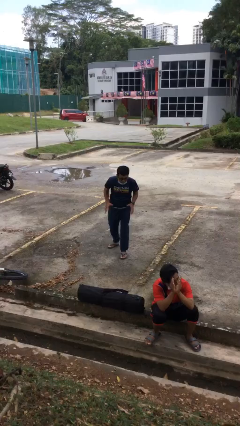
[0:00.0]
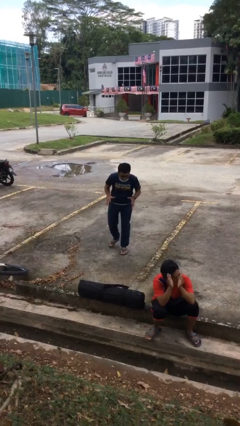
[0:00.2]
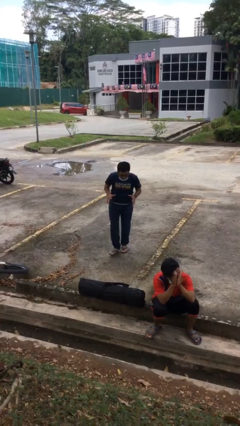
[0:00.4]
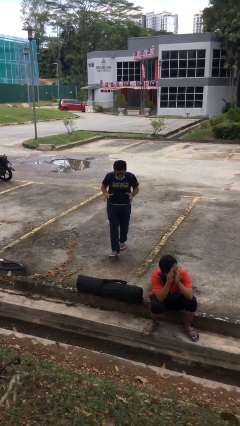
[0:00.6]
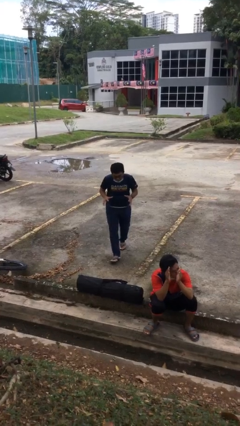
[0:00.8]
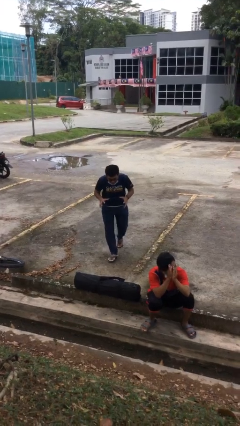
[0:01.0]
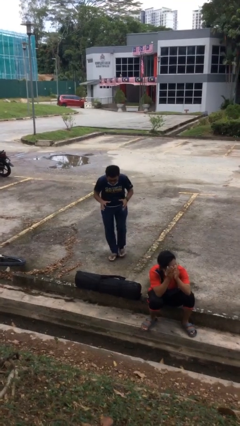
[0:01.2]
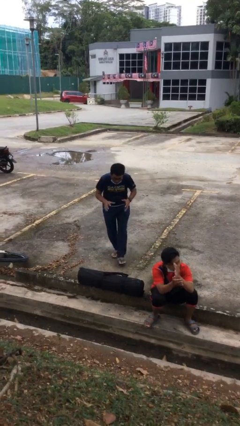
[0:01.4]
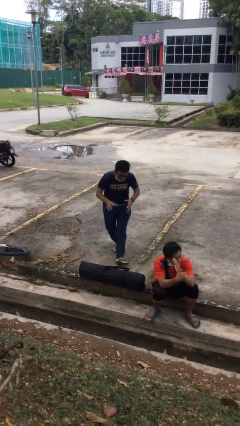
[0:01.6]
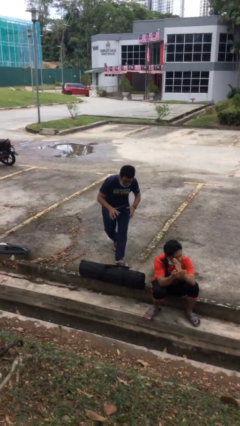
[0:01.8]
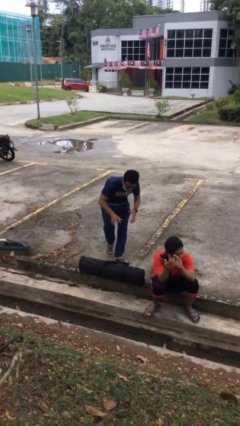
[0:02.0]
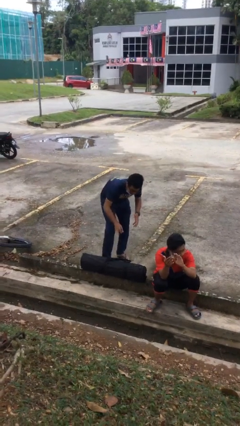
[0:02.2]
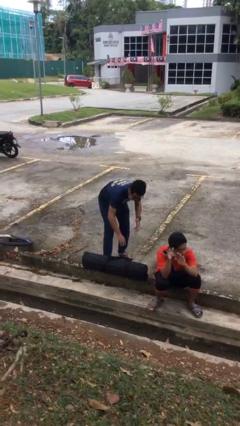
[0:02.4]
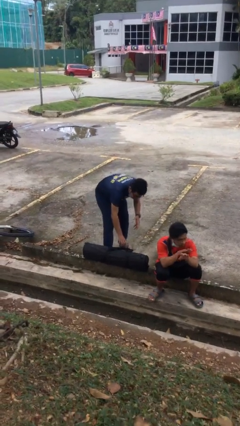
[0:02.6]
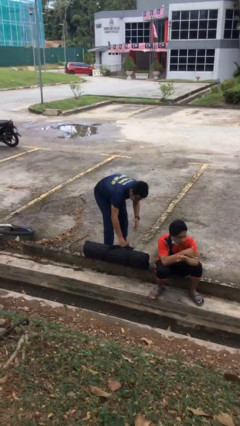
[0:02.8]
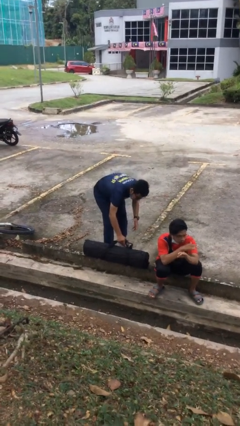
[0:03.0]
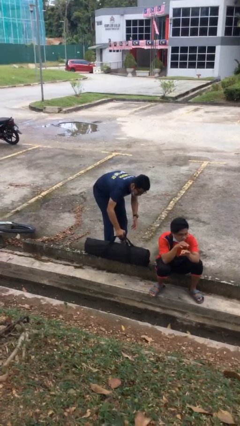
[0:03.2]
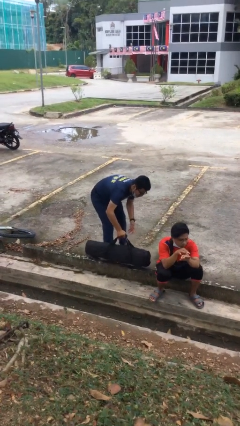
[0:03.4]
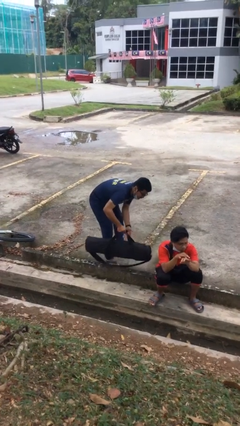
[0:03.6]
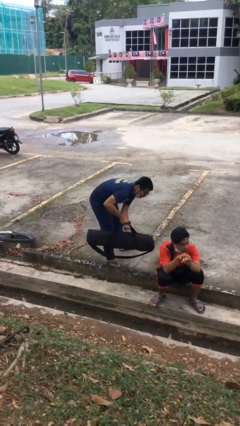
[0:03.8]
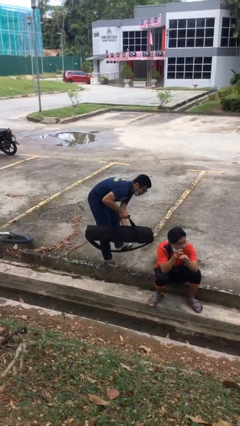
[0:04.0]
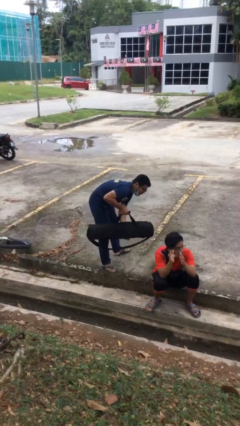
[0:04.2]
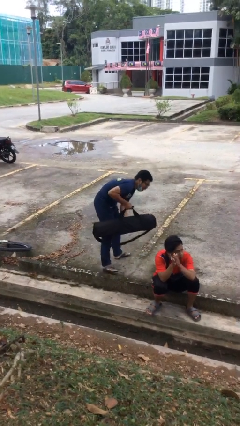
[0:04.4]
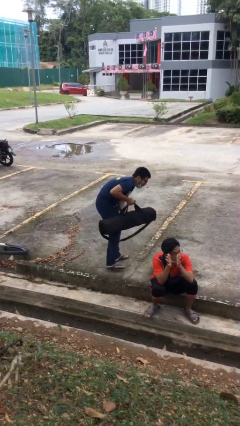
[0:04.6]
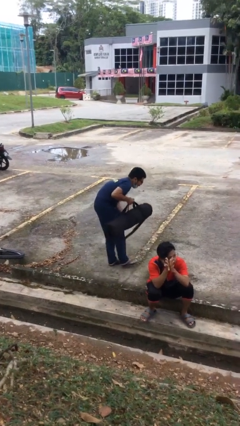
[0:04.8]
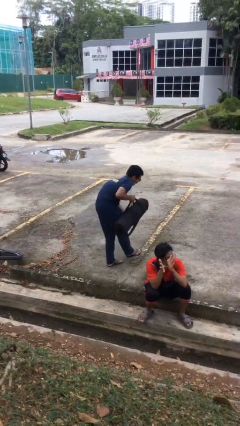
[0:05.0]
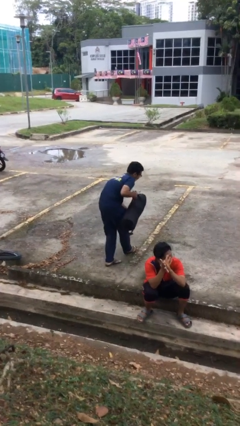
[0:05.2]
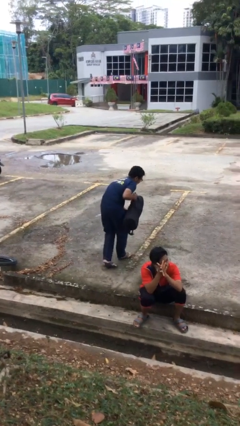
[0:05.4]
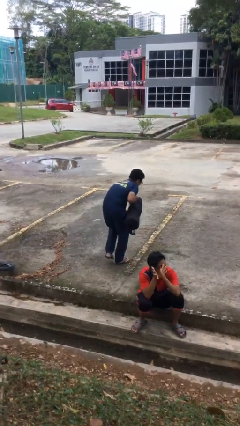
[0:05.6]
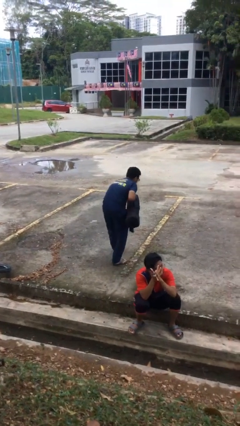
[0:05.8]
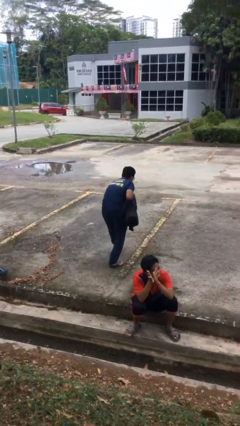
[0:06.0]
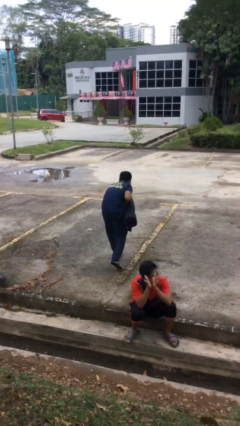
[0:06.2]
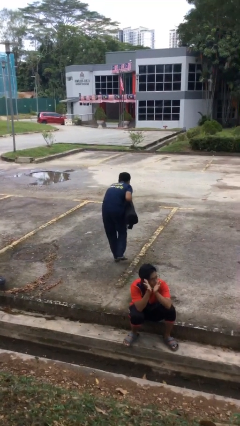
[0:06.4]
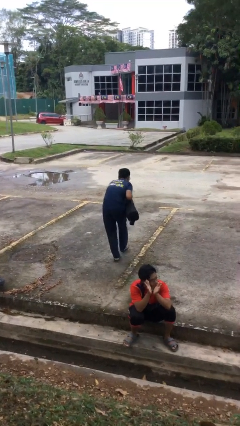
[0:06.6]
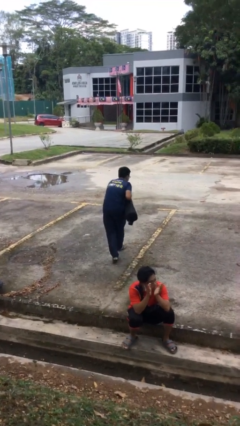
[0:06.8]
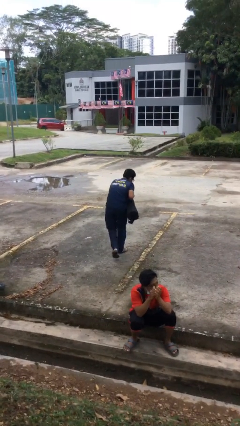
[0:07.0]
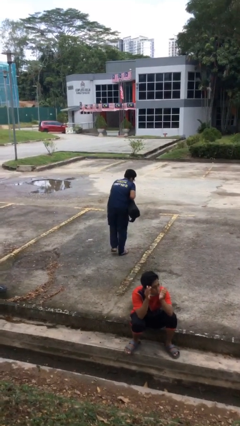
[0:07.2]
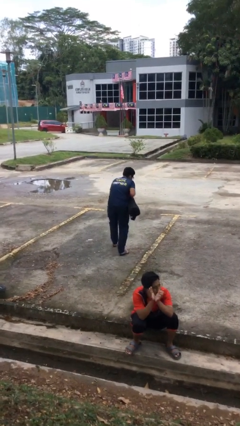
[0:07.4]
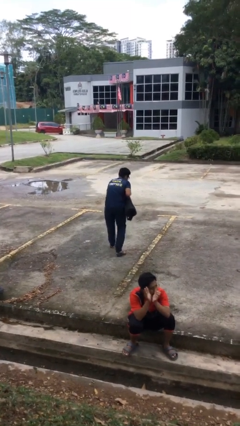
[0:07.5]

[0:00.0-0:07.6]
person steals object from person

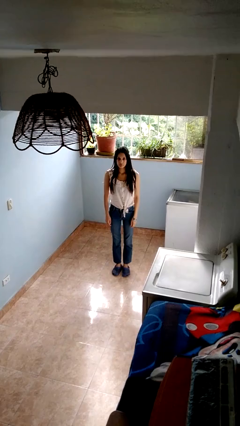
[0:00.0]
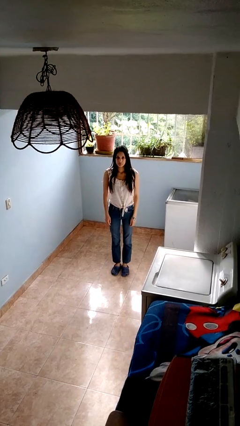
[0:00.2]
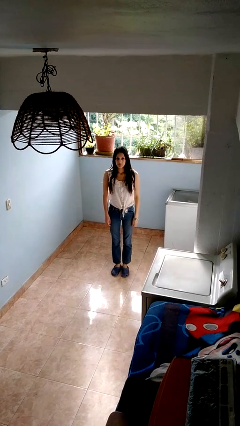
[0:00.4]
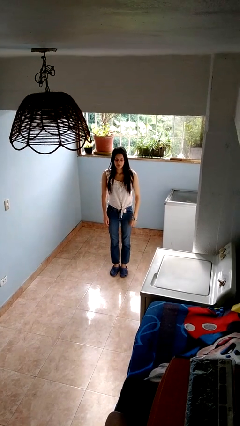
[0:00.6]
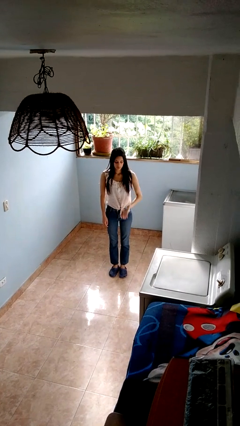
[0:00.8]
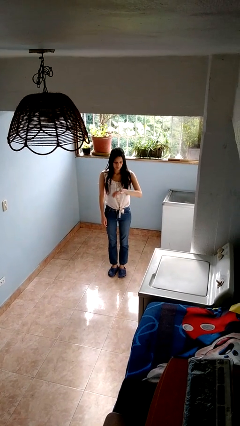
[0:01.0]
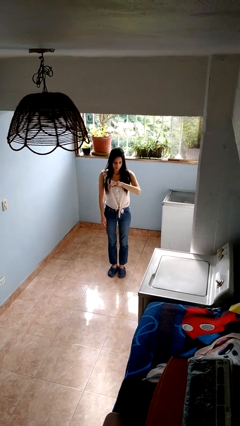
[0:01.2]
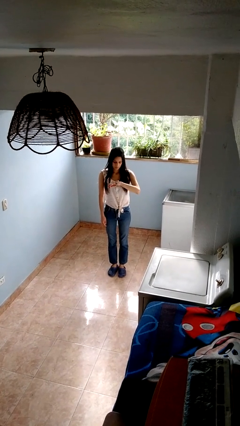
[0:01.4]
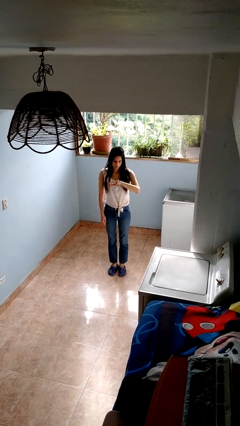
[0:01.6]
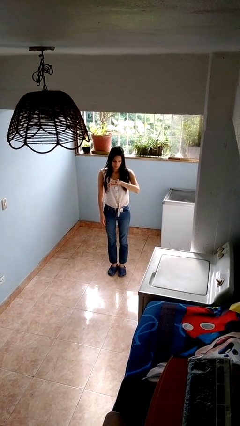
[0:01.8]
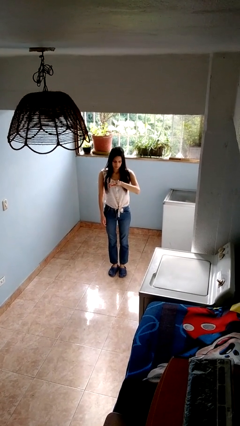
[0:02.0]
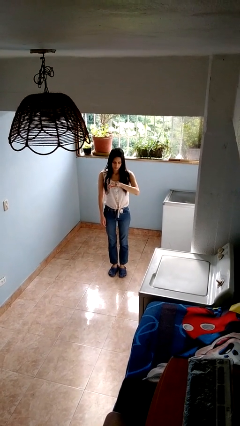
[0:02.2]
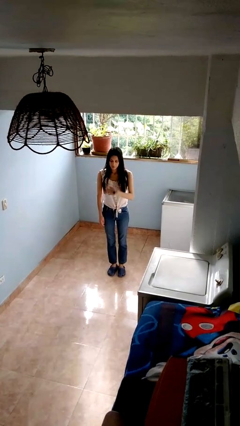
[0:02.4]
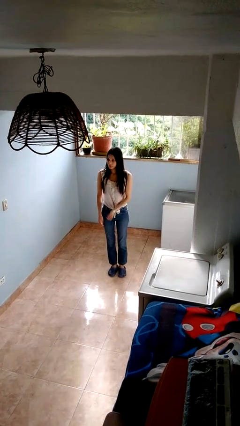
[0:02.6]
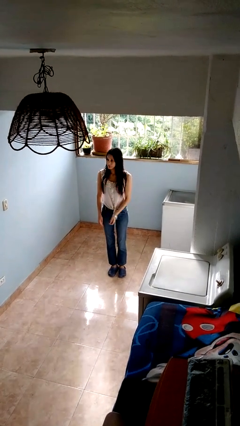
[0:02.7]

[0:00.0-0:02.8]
person looks at wristwatch

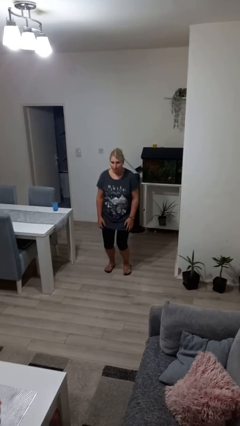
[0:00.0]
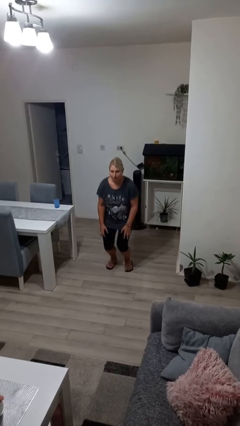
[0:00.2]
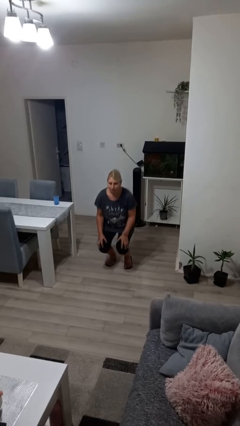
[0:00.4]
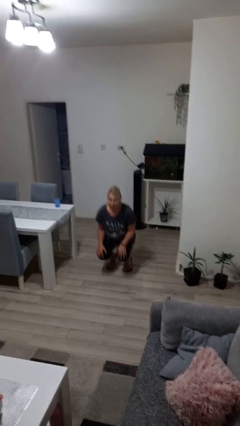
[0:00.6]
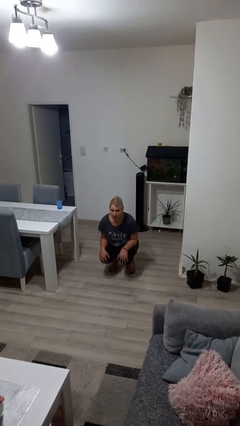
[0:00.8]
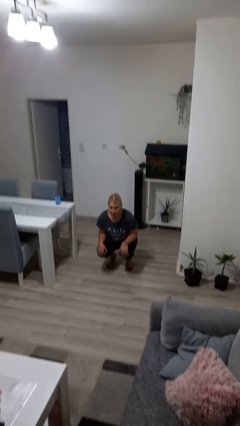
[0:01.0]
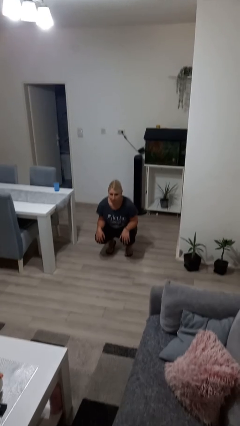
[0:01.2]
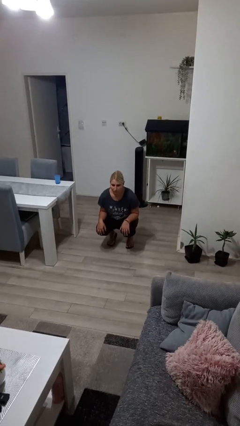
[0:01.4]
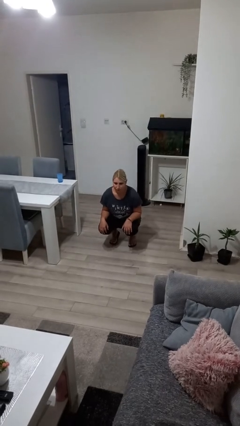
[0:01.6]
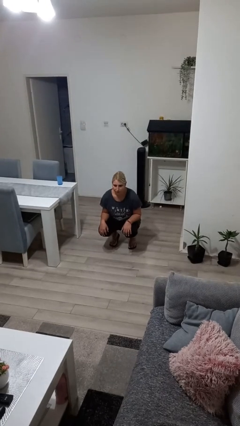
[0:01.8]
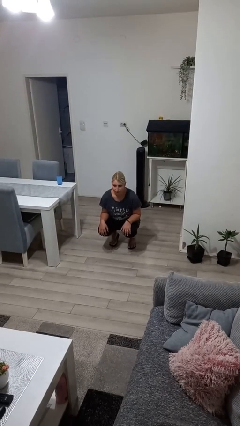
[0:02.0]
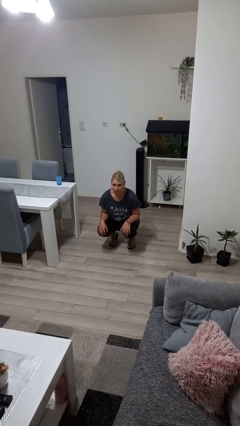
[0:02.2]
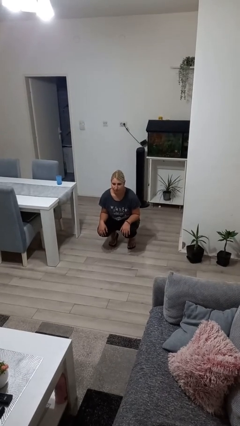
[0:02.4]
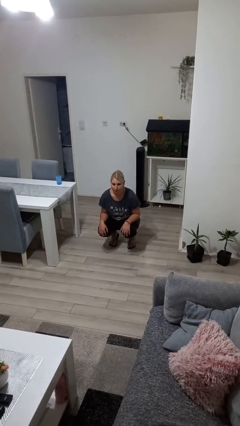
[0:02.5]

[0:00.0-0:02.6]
person squats

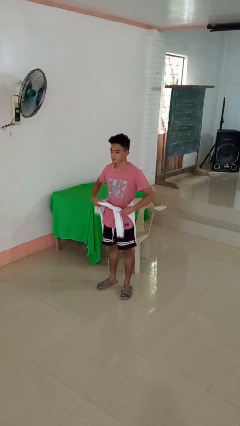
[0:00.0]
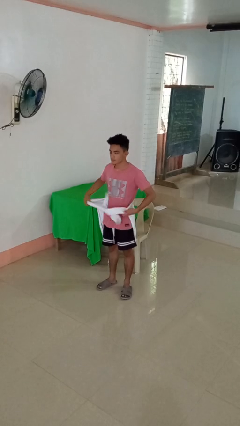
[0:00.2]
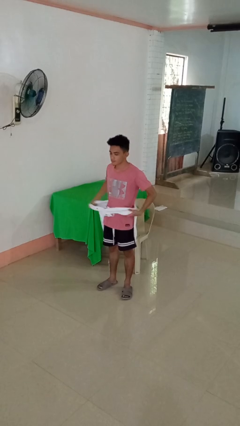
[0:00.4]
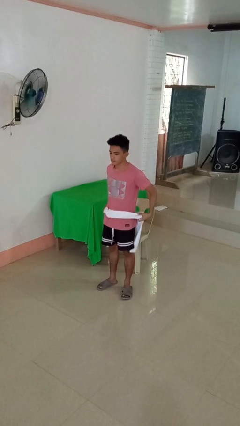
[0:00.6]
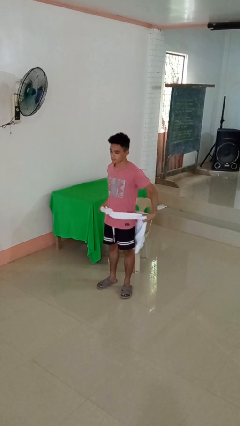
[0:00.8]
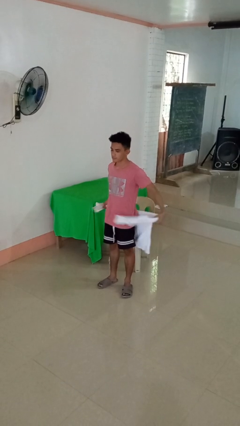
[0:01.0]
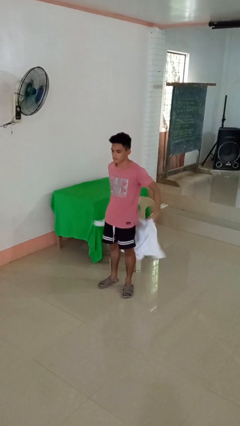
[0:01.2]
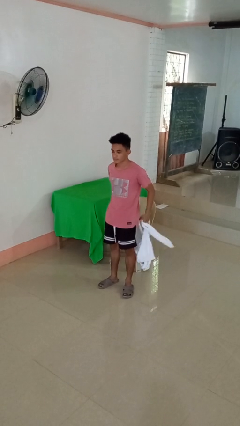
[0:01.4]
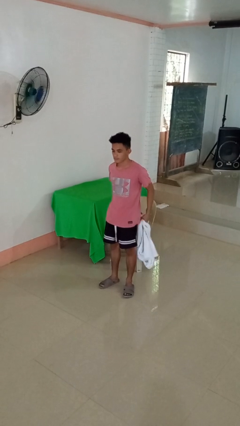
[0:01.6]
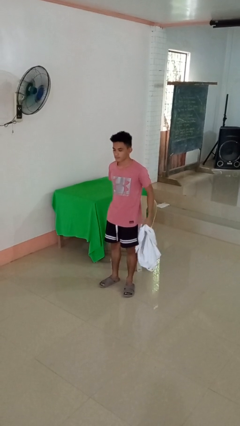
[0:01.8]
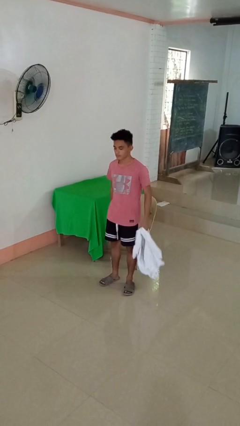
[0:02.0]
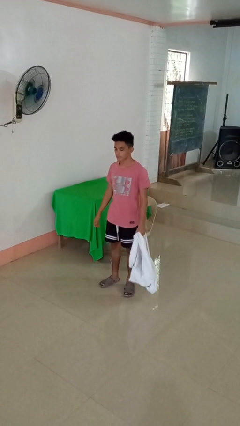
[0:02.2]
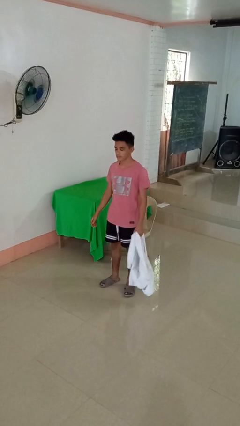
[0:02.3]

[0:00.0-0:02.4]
person unties jacket around waist

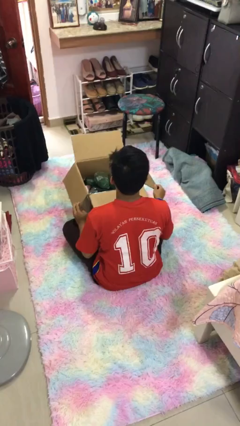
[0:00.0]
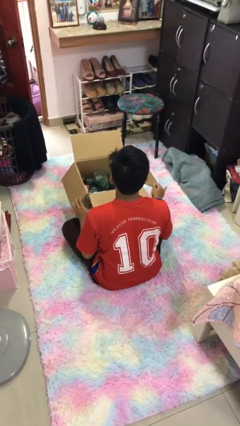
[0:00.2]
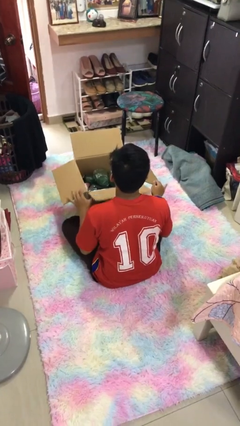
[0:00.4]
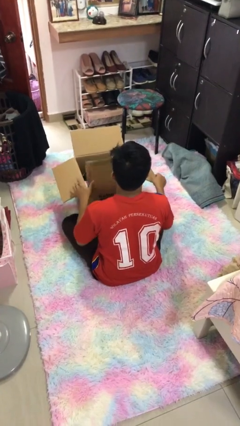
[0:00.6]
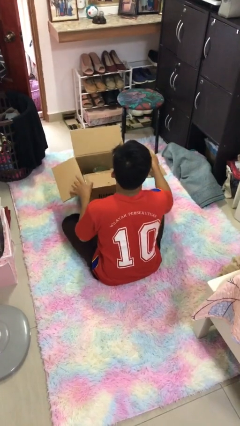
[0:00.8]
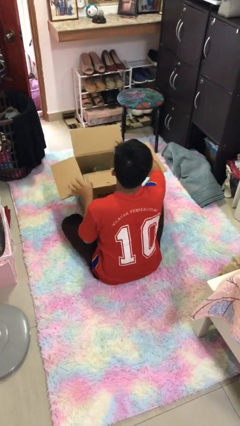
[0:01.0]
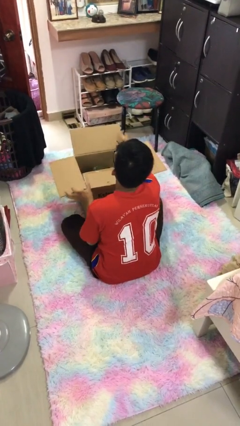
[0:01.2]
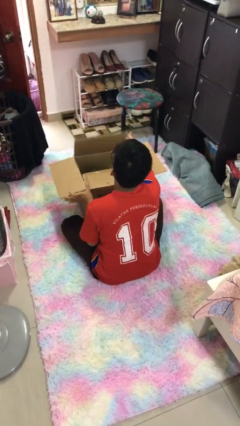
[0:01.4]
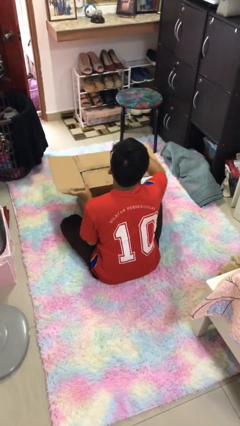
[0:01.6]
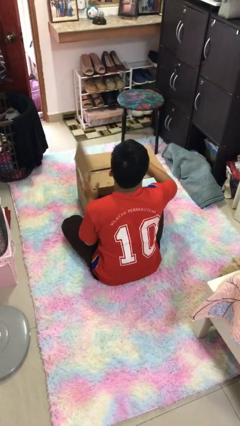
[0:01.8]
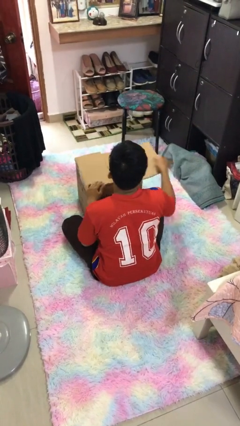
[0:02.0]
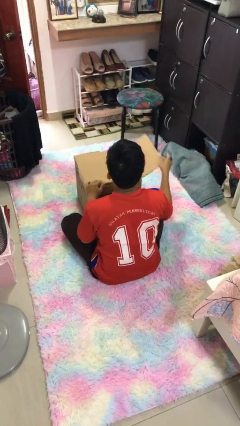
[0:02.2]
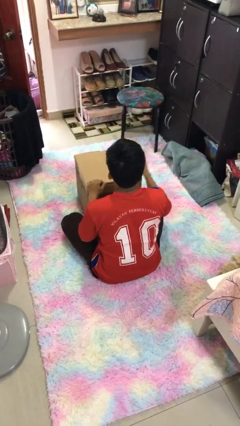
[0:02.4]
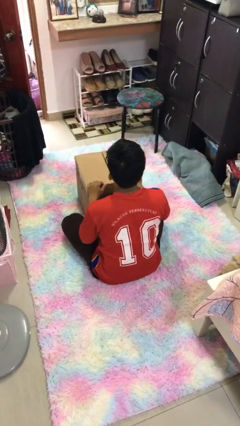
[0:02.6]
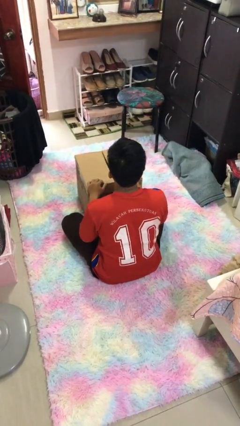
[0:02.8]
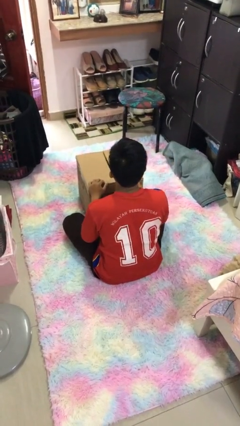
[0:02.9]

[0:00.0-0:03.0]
person closes box
